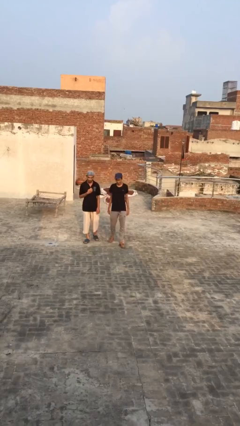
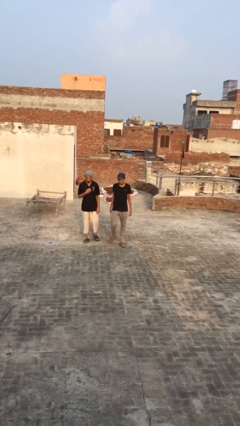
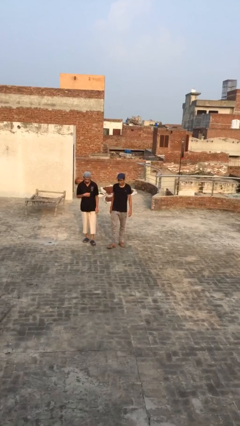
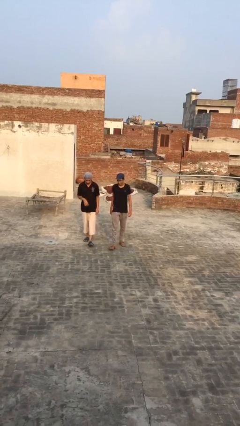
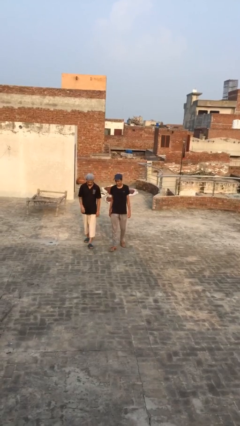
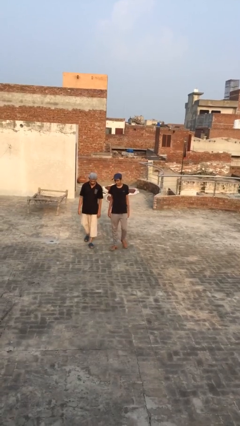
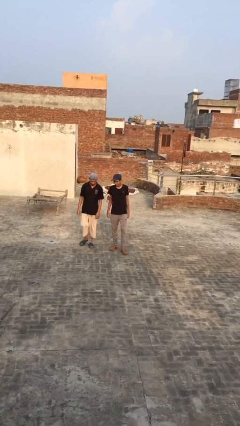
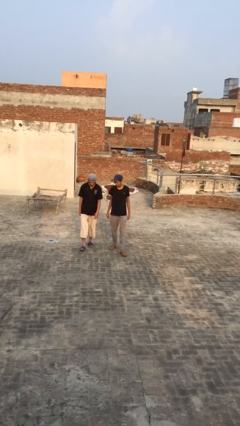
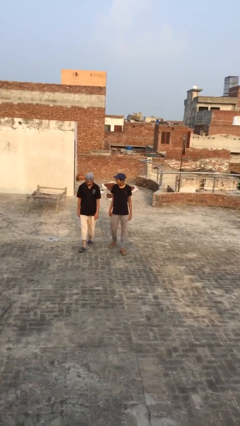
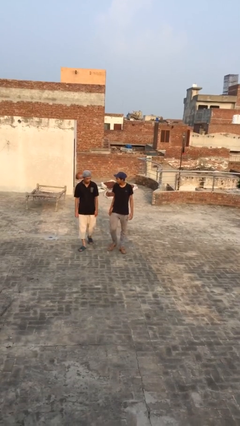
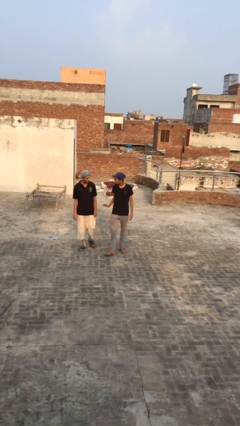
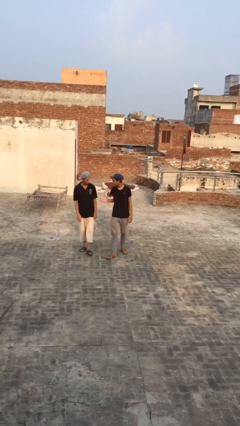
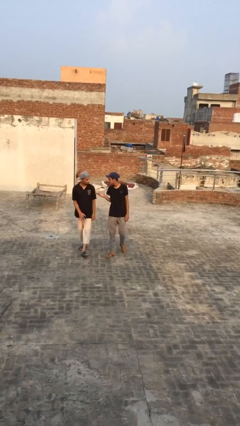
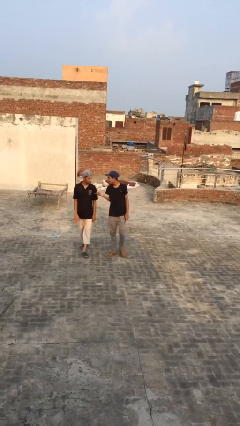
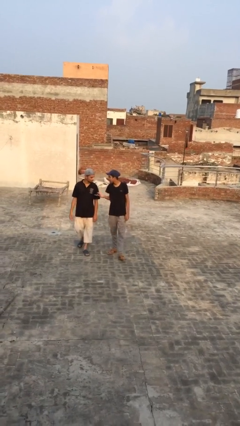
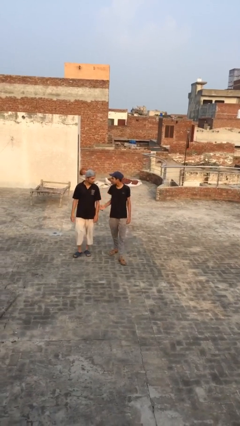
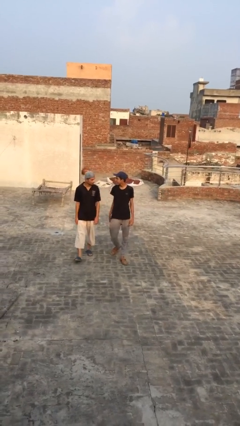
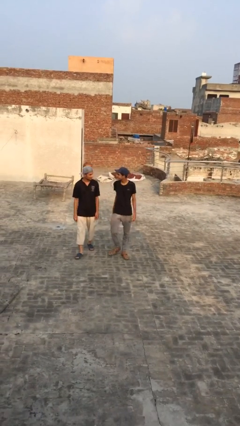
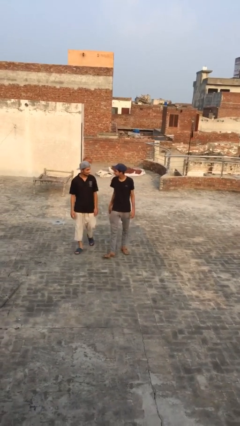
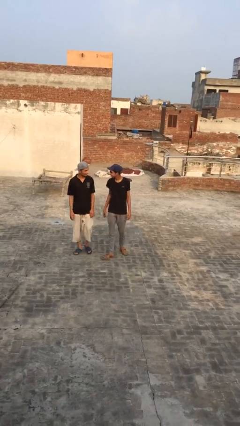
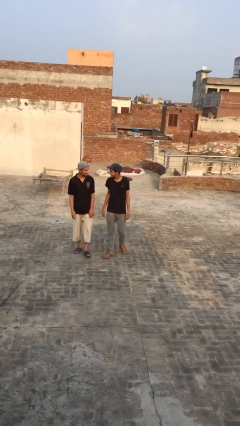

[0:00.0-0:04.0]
person talks to person

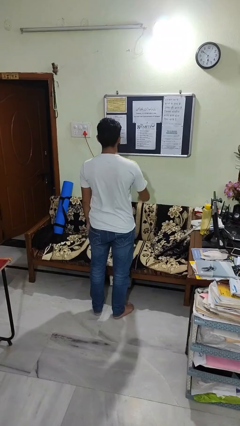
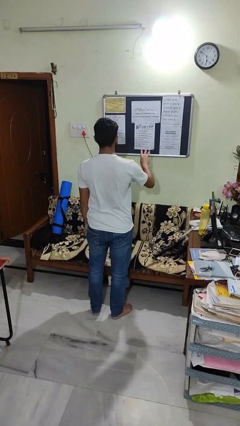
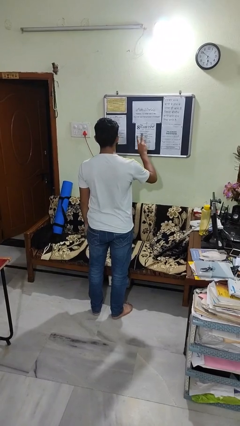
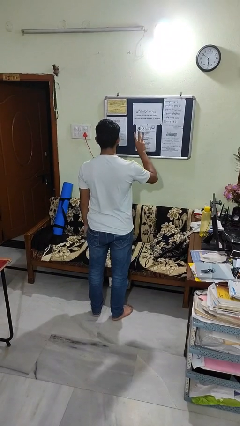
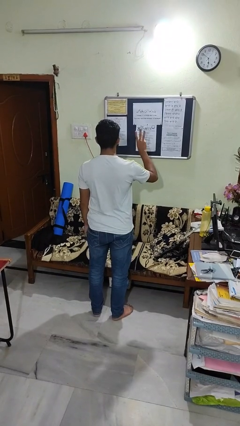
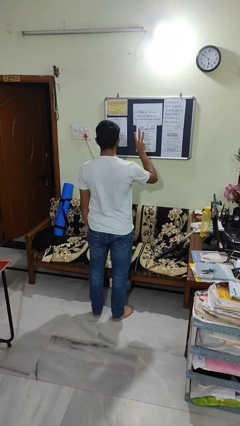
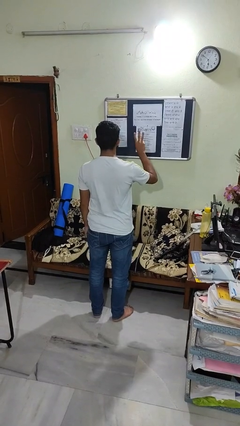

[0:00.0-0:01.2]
person gestures number three

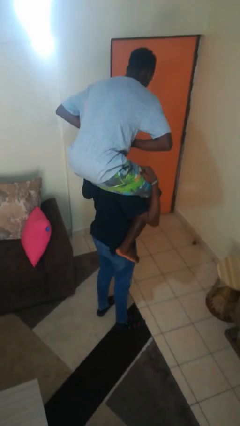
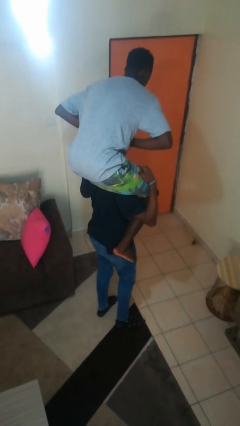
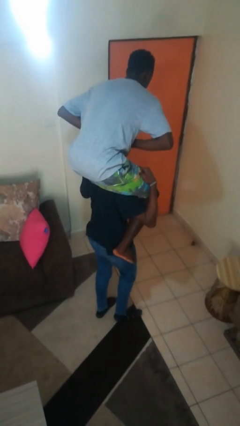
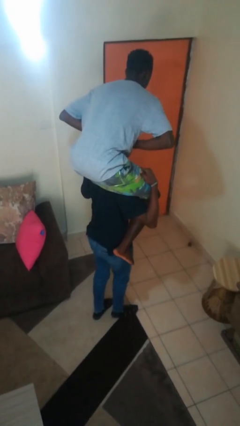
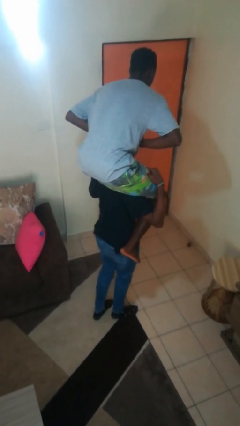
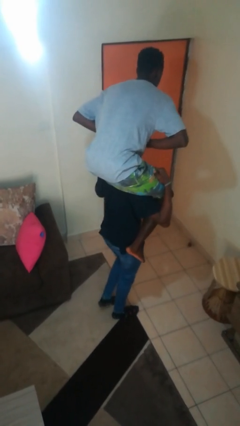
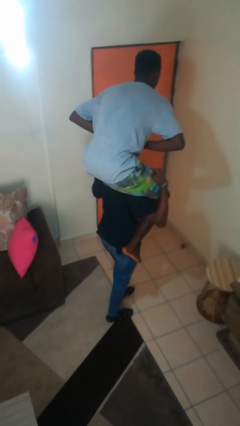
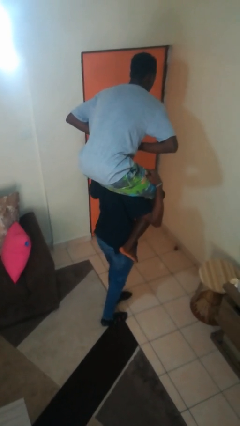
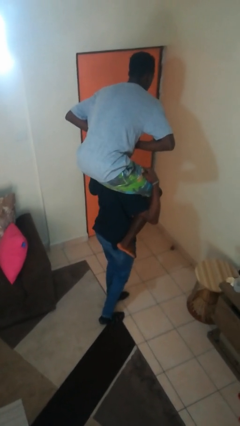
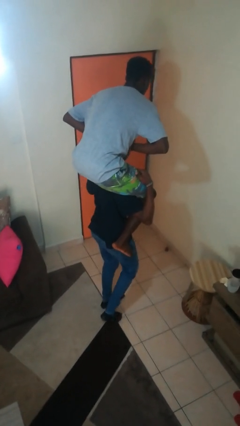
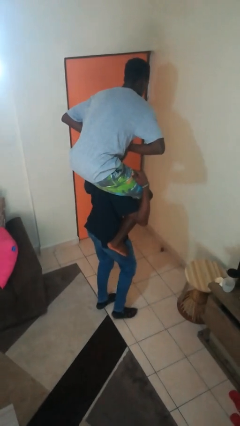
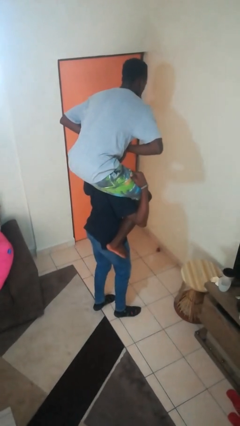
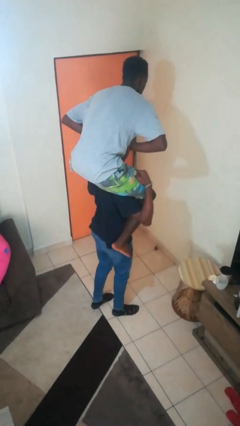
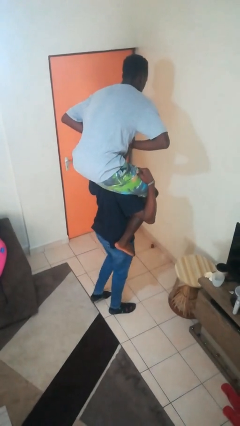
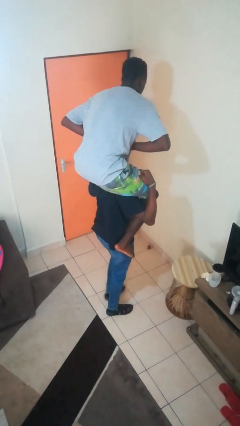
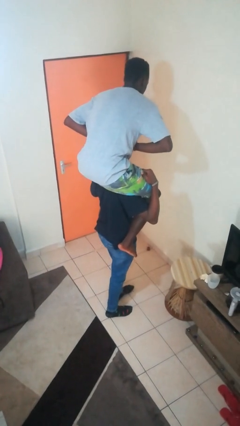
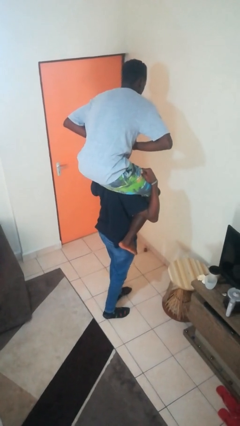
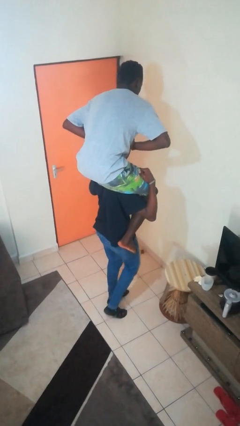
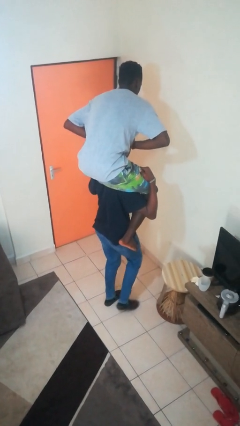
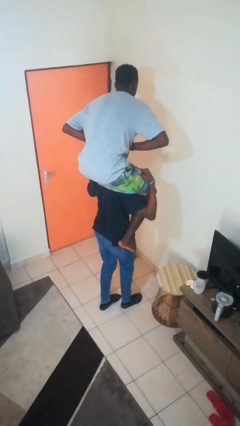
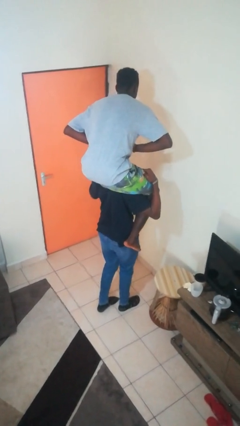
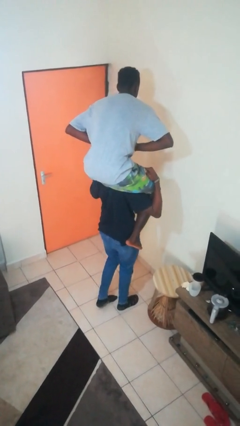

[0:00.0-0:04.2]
person carries person on shoulders

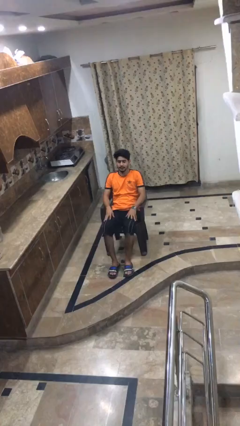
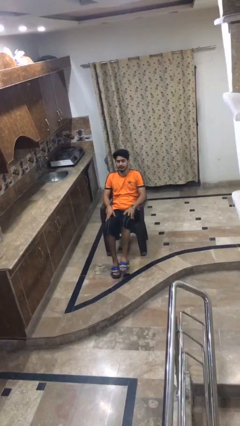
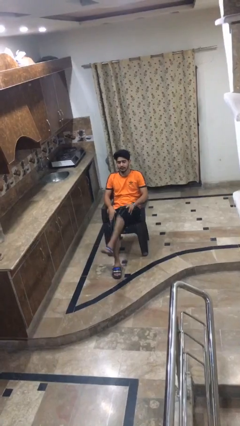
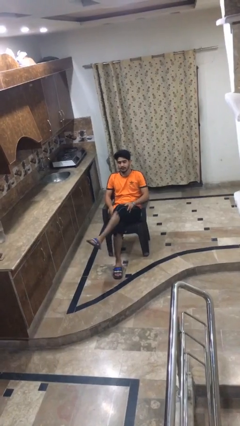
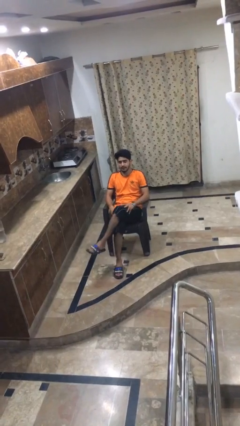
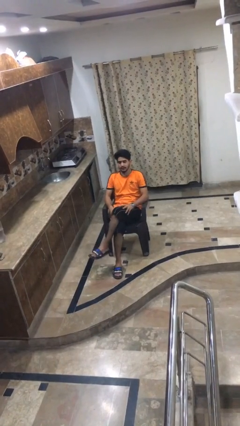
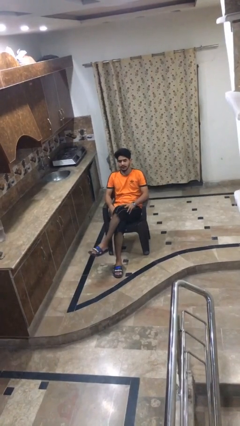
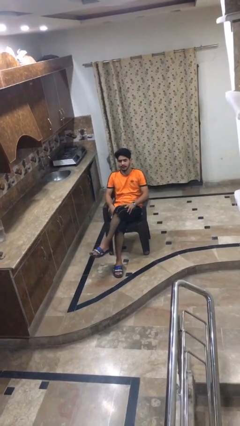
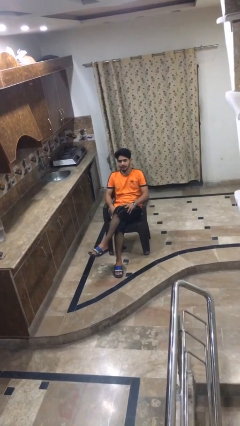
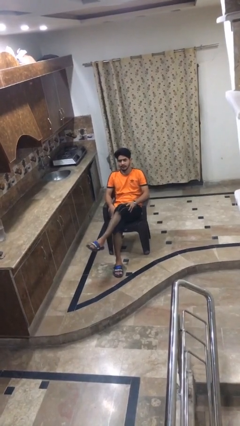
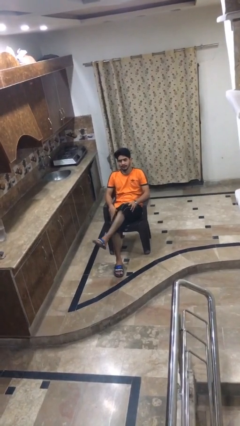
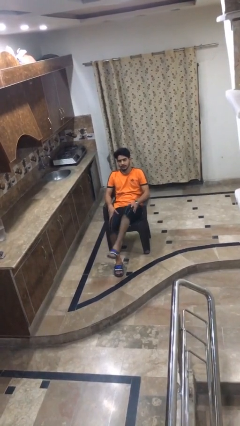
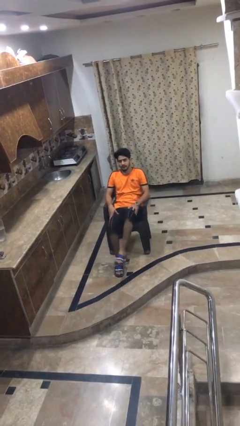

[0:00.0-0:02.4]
person crosses legs

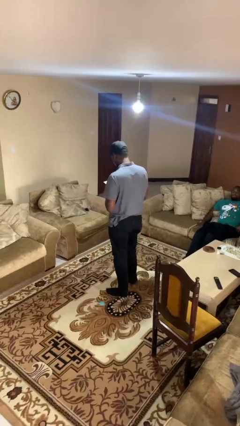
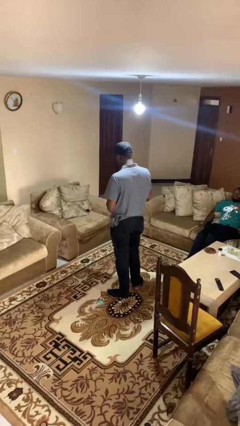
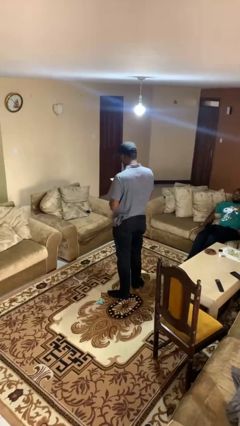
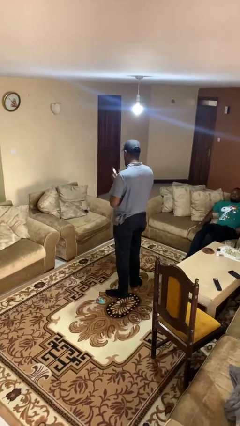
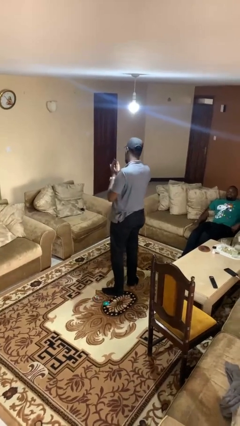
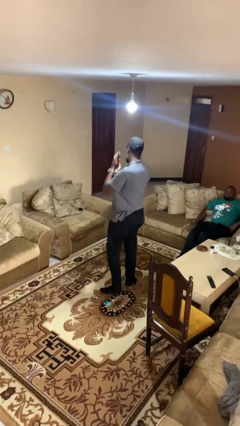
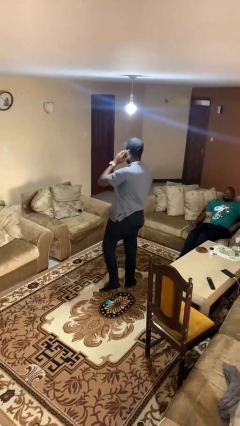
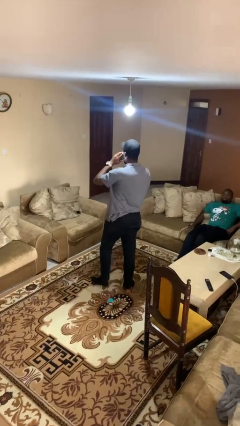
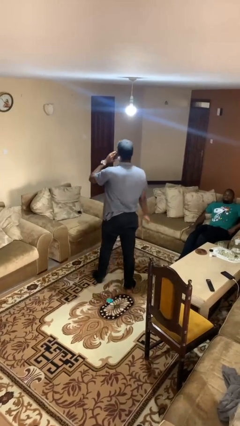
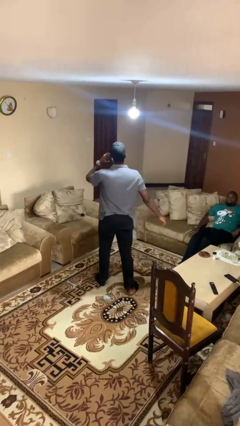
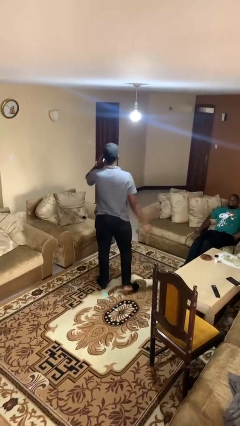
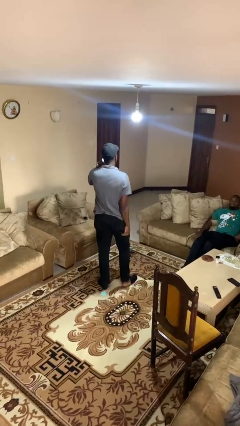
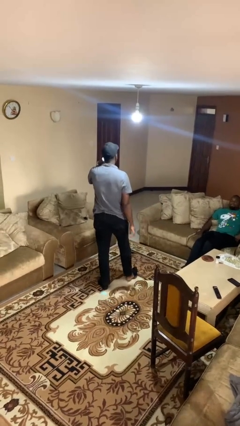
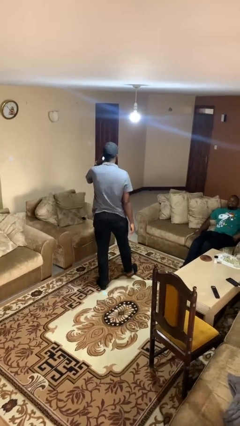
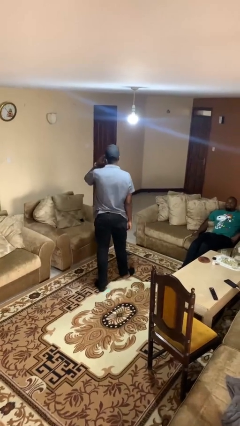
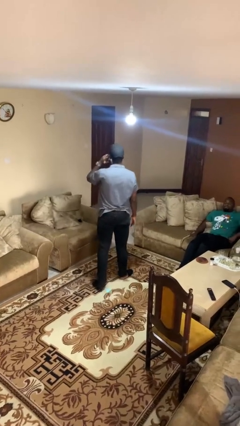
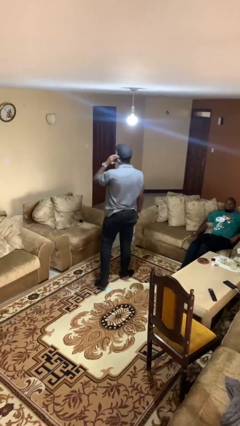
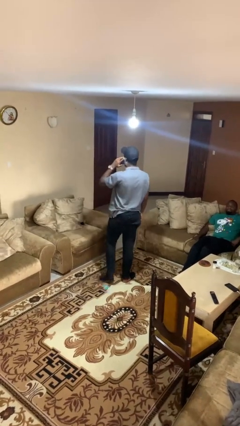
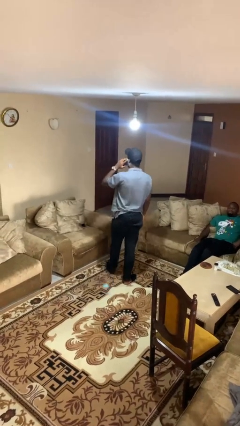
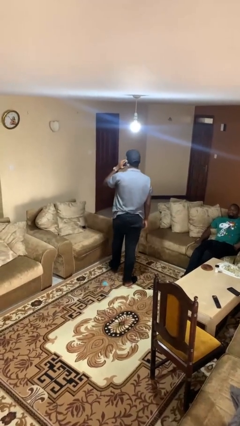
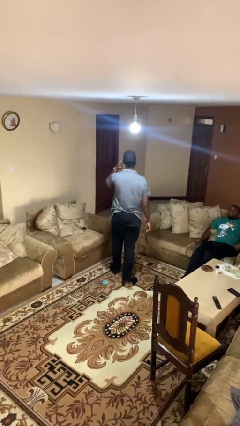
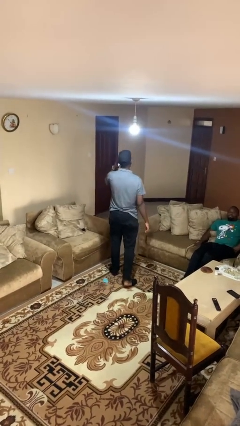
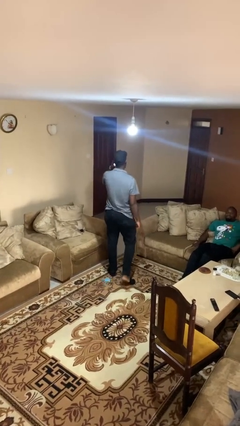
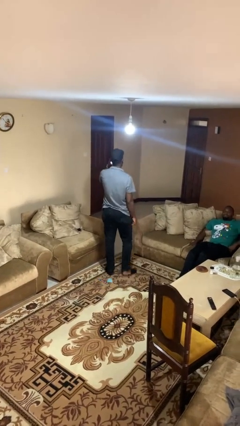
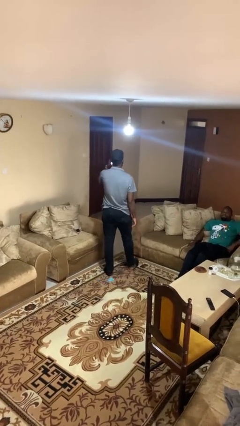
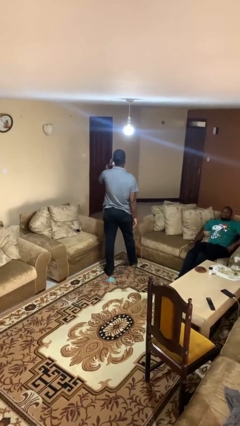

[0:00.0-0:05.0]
person talks on phone

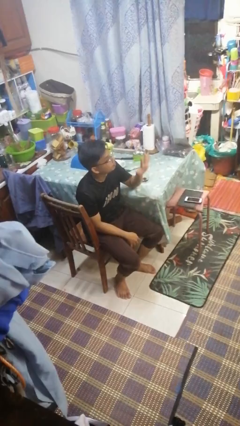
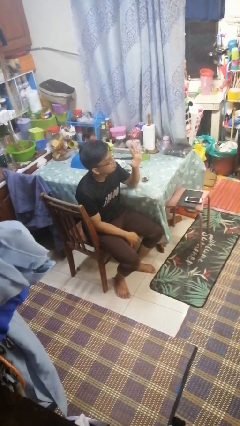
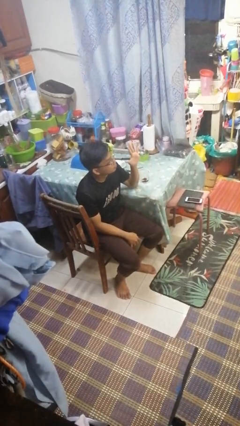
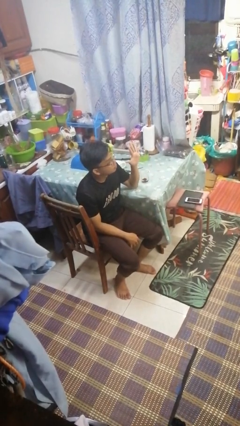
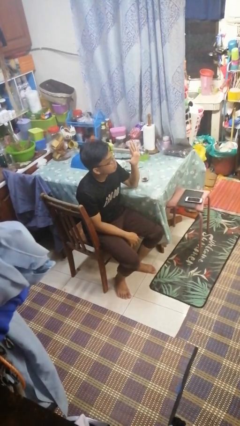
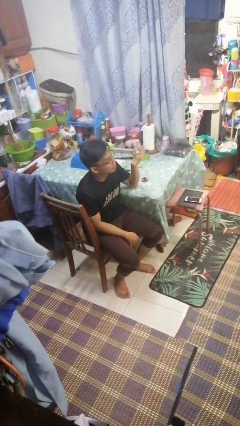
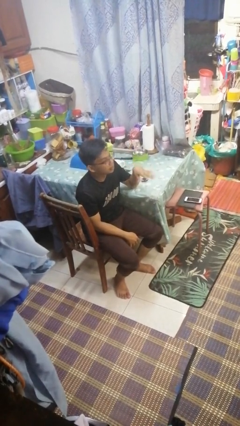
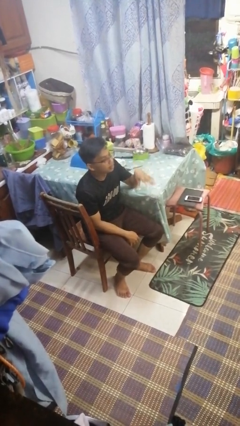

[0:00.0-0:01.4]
person gestures number five
